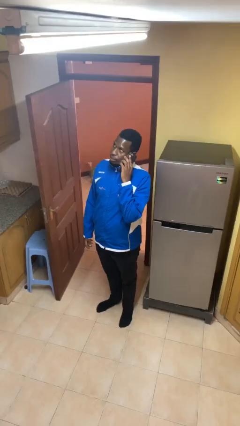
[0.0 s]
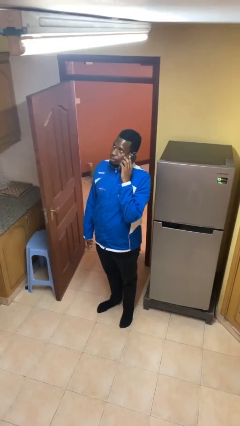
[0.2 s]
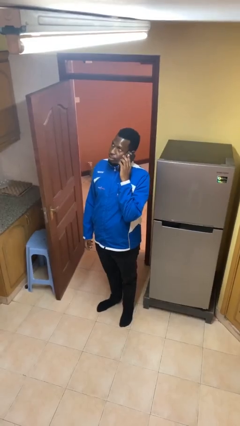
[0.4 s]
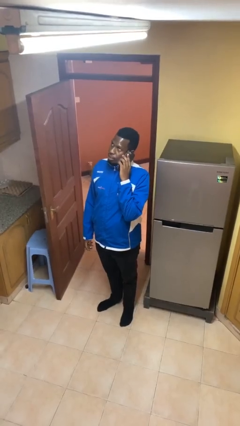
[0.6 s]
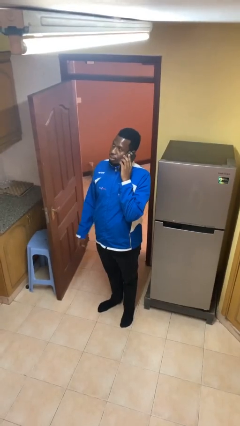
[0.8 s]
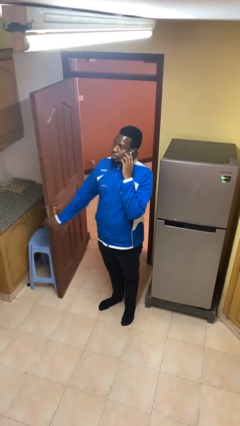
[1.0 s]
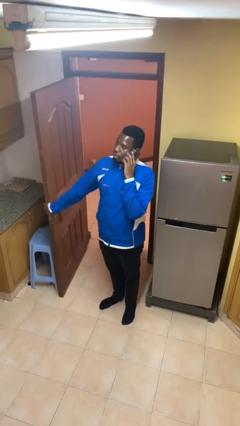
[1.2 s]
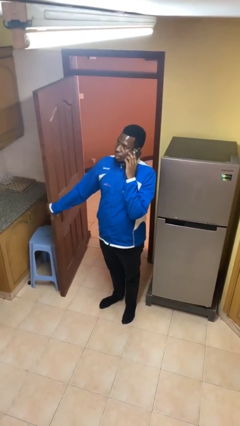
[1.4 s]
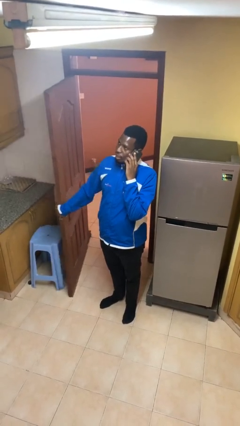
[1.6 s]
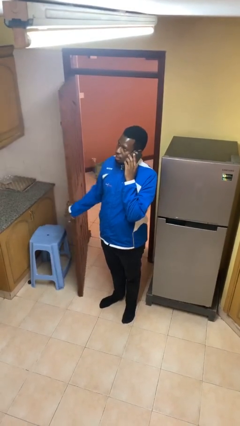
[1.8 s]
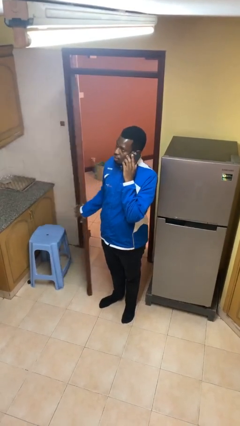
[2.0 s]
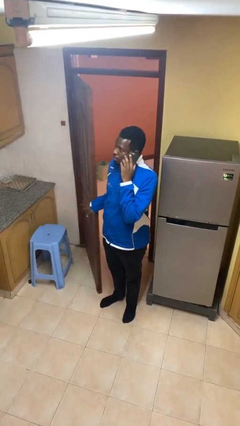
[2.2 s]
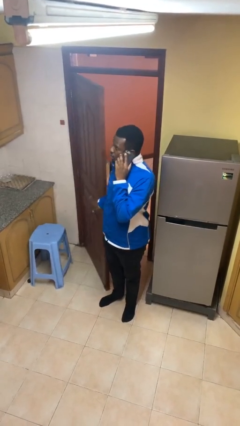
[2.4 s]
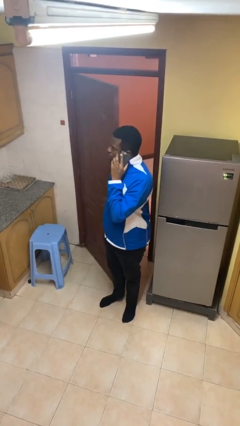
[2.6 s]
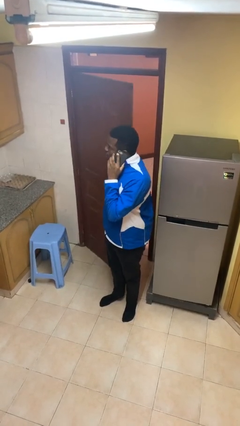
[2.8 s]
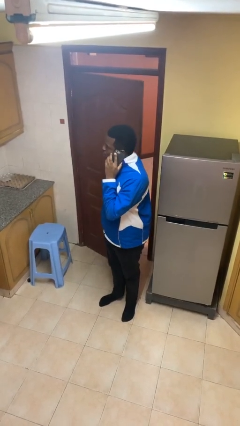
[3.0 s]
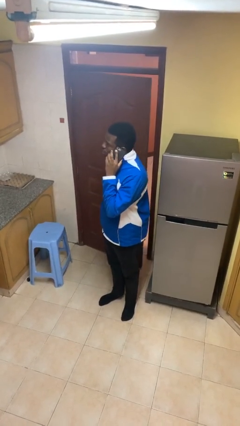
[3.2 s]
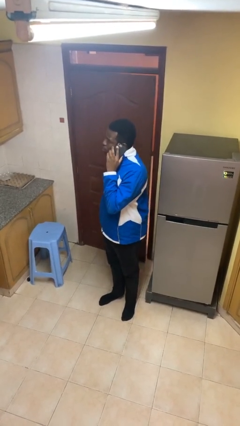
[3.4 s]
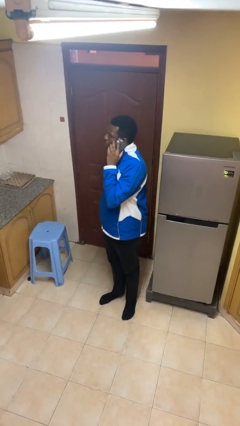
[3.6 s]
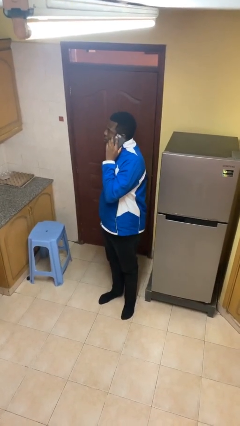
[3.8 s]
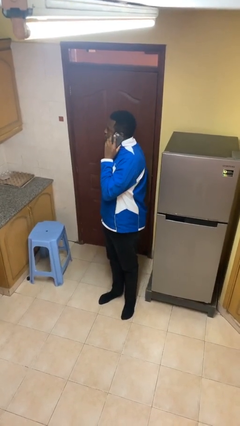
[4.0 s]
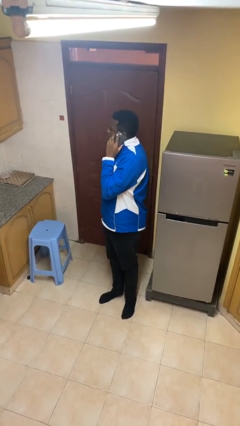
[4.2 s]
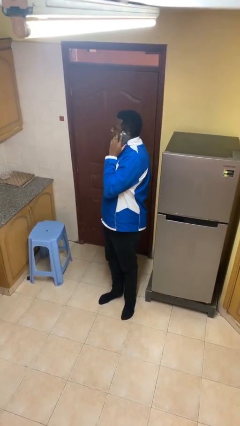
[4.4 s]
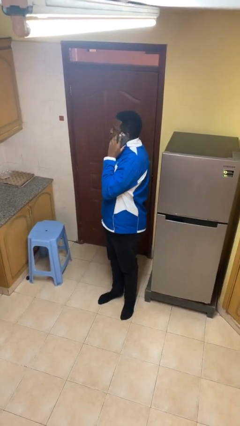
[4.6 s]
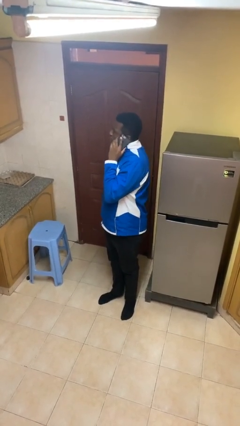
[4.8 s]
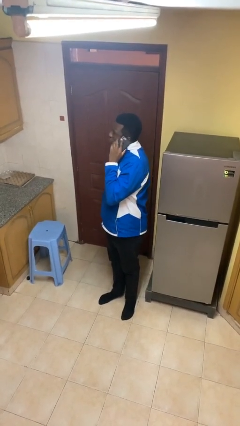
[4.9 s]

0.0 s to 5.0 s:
person closes facility door

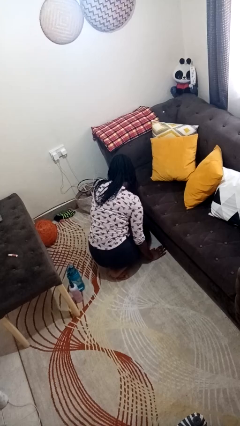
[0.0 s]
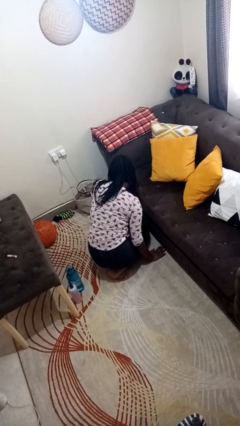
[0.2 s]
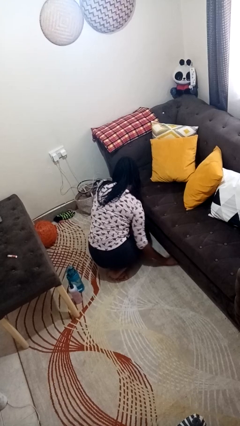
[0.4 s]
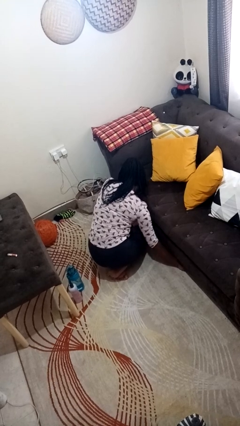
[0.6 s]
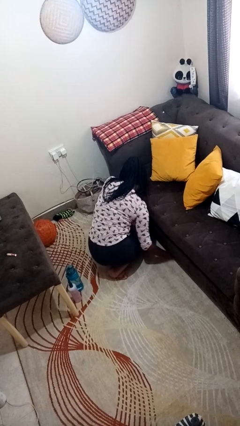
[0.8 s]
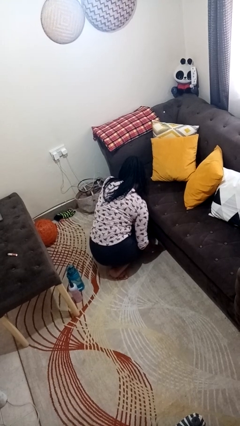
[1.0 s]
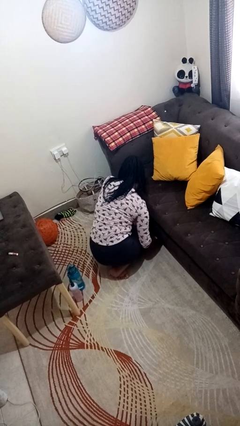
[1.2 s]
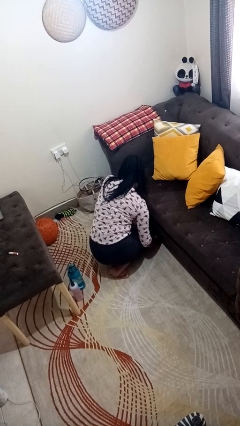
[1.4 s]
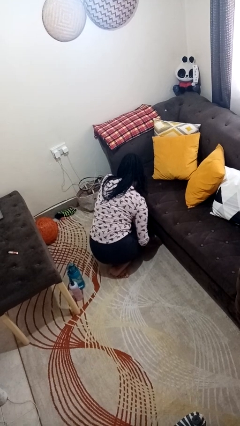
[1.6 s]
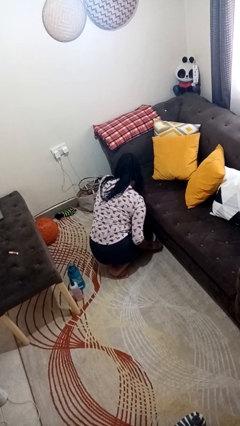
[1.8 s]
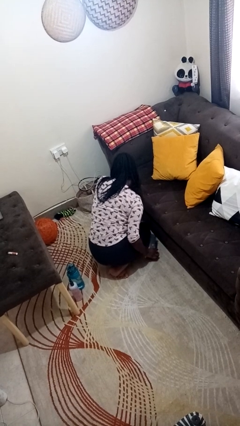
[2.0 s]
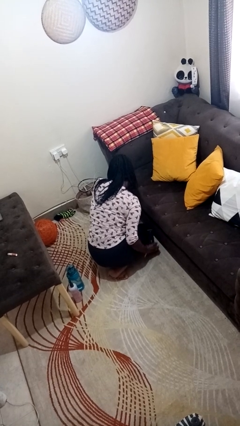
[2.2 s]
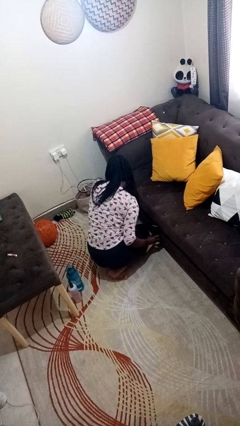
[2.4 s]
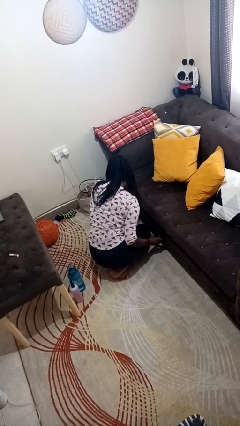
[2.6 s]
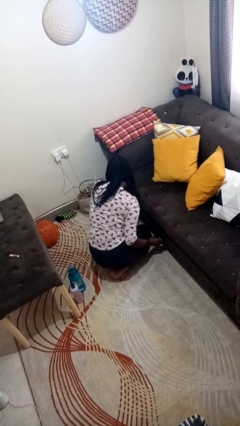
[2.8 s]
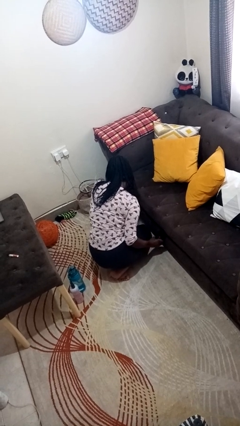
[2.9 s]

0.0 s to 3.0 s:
person searches under couch

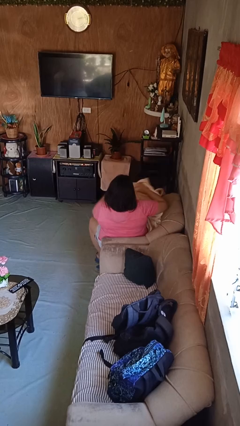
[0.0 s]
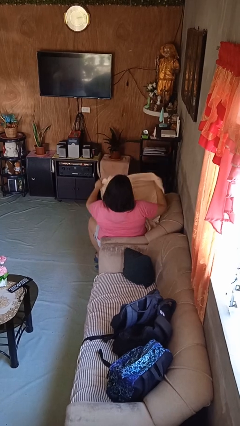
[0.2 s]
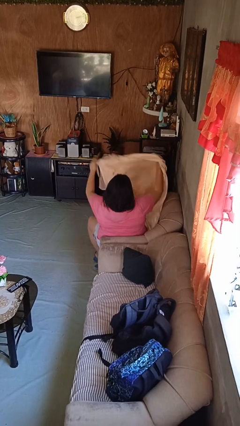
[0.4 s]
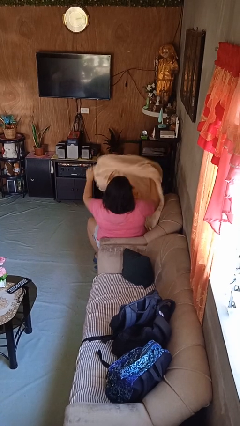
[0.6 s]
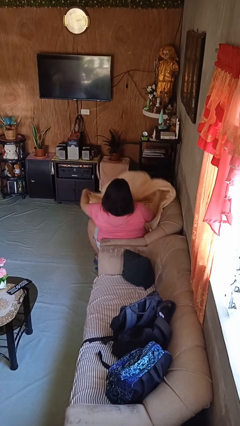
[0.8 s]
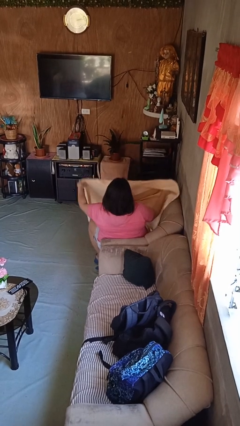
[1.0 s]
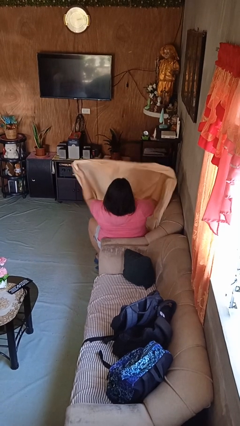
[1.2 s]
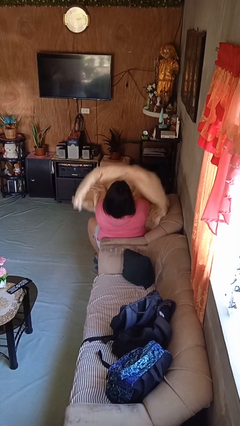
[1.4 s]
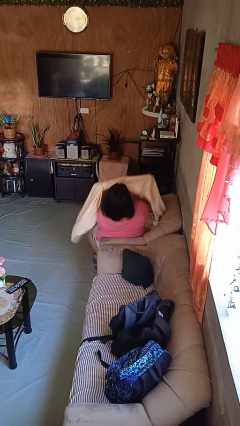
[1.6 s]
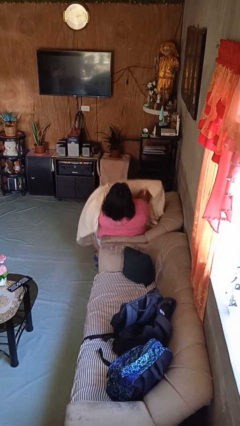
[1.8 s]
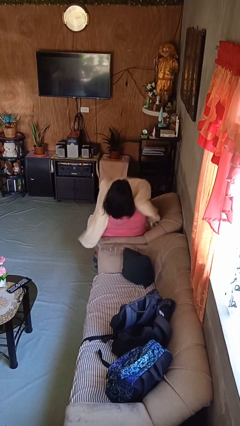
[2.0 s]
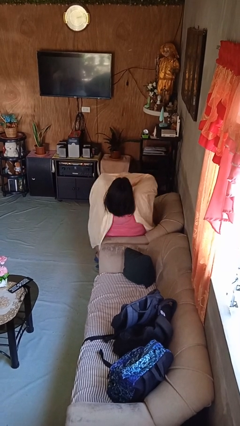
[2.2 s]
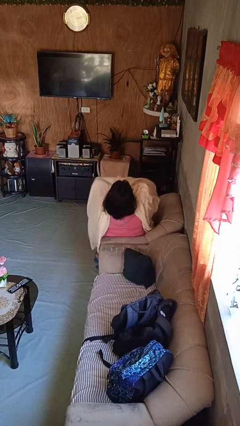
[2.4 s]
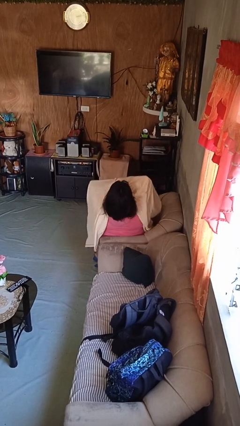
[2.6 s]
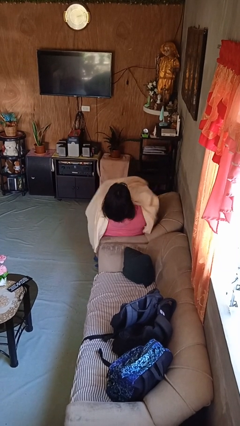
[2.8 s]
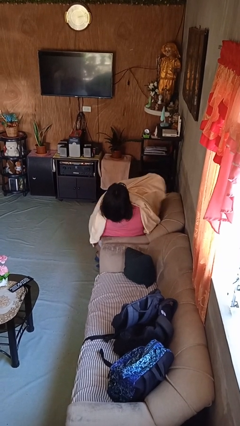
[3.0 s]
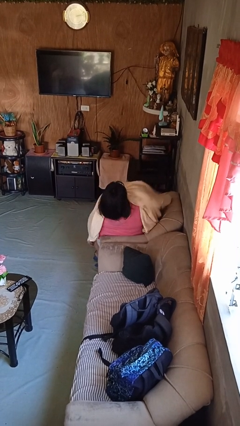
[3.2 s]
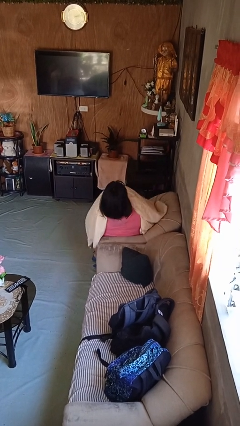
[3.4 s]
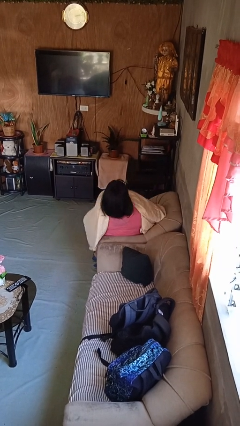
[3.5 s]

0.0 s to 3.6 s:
person covers with blanket

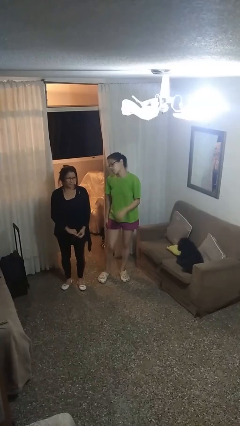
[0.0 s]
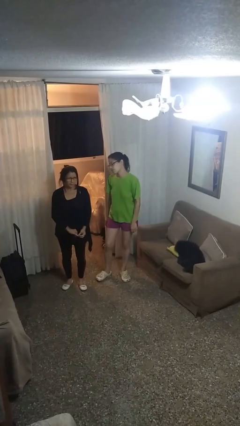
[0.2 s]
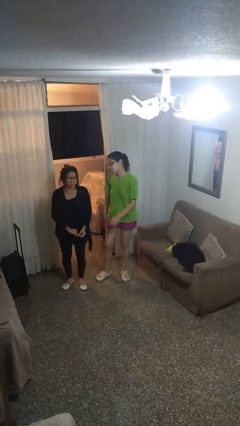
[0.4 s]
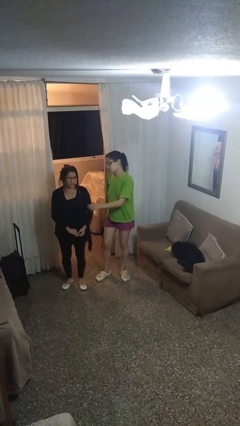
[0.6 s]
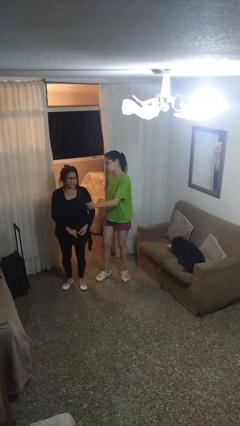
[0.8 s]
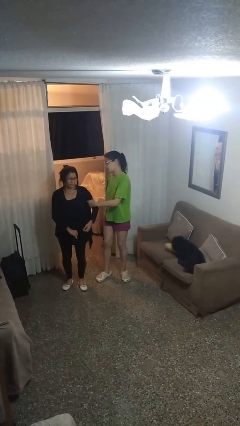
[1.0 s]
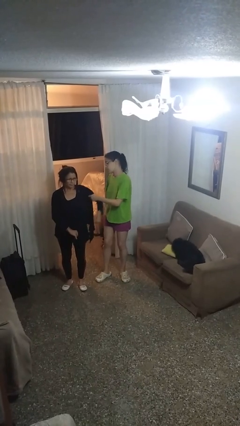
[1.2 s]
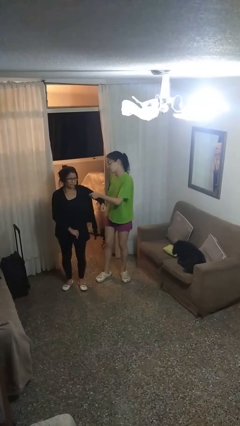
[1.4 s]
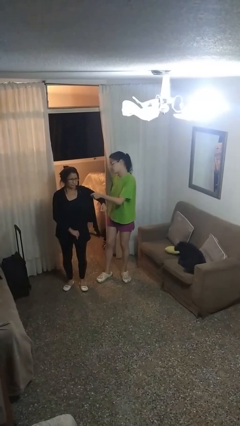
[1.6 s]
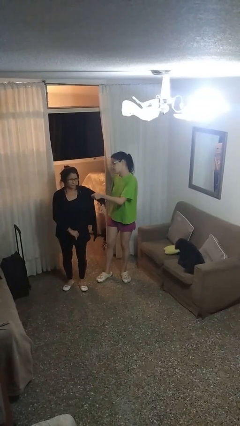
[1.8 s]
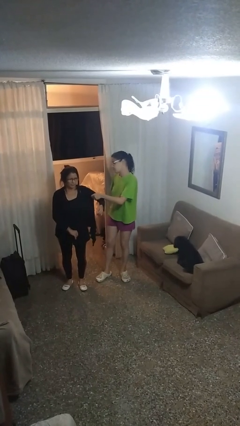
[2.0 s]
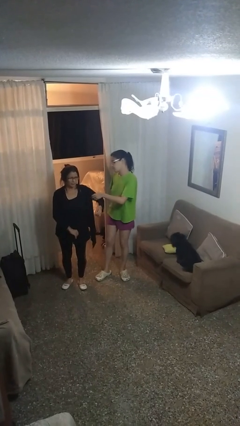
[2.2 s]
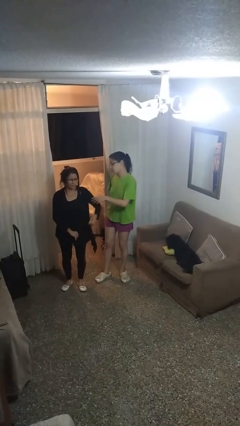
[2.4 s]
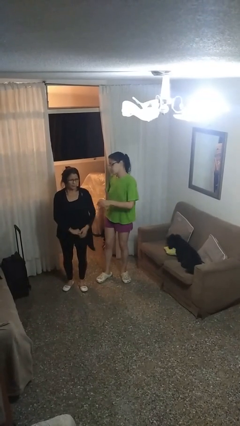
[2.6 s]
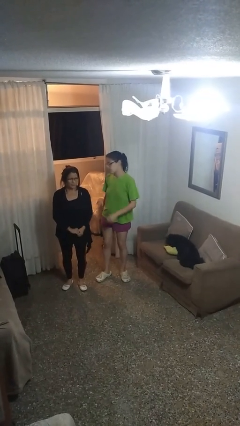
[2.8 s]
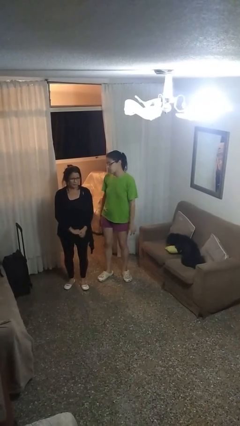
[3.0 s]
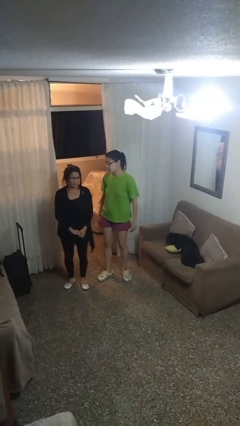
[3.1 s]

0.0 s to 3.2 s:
person grabs person by bicep

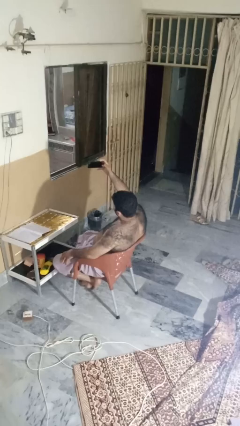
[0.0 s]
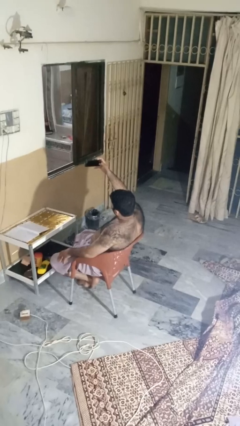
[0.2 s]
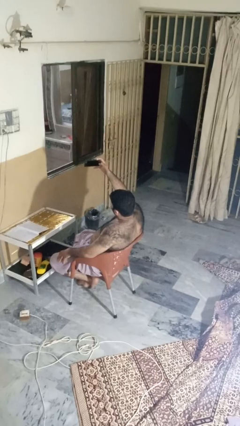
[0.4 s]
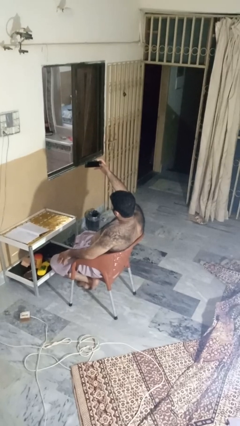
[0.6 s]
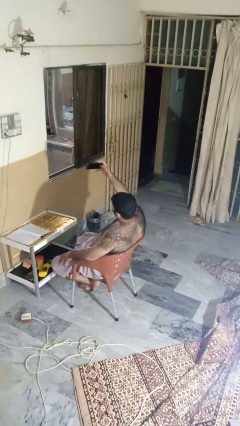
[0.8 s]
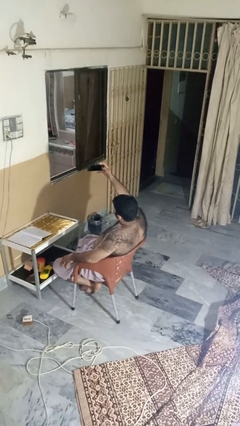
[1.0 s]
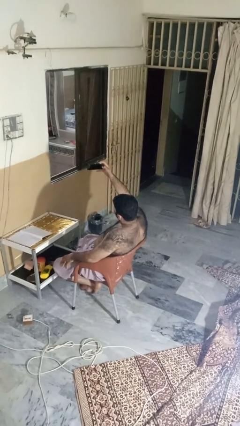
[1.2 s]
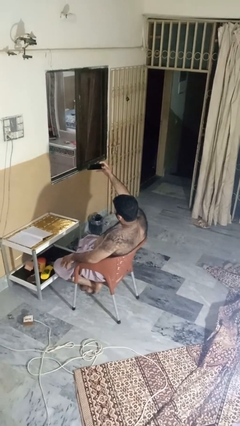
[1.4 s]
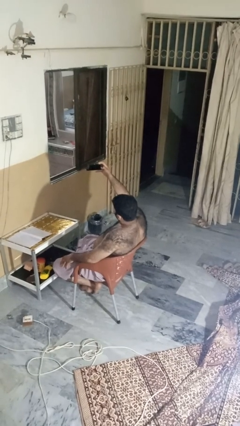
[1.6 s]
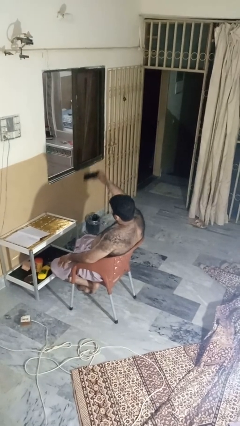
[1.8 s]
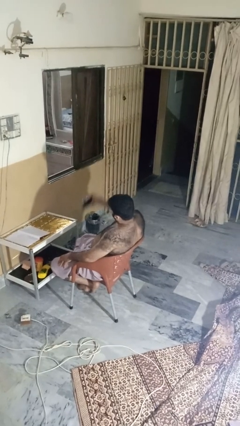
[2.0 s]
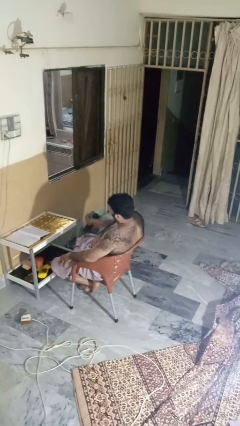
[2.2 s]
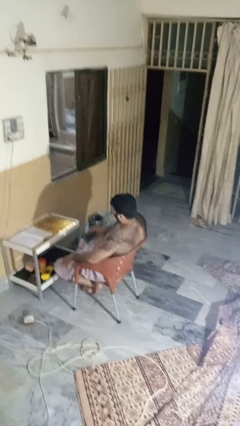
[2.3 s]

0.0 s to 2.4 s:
person takes selfie

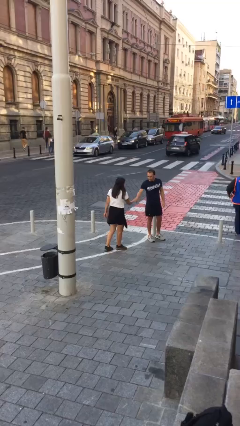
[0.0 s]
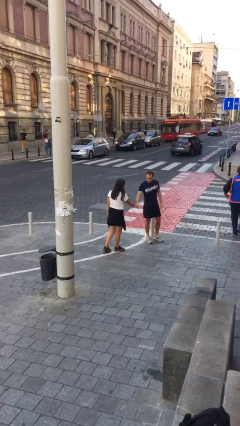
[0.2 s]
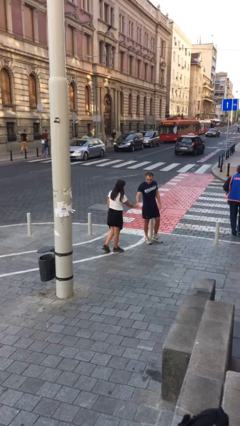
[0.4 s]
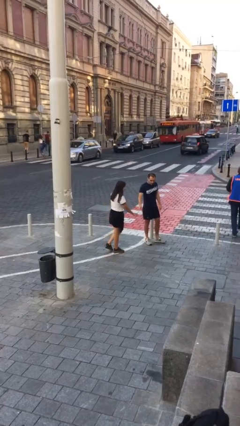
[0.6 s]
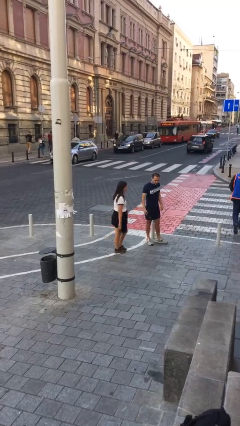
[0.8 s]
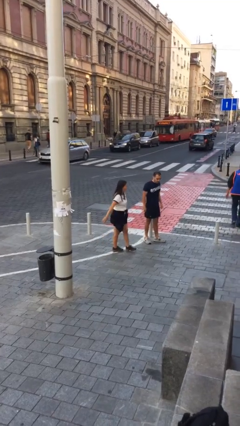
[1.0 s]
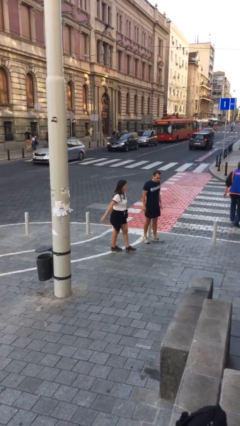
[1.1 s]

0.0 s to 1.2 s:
person shakes hand
